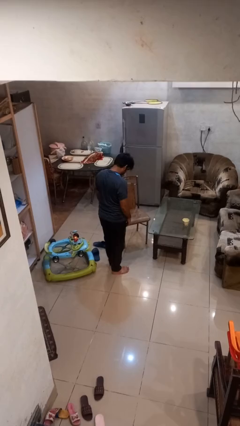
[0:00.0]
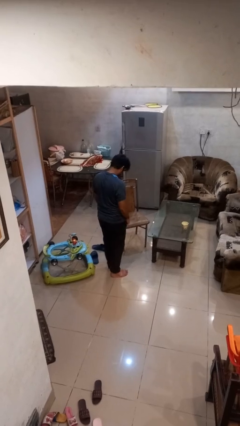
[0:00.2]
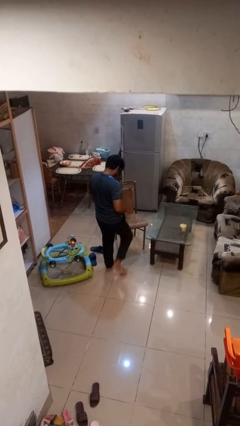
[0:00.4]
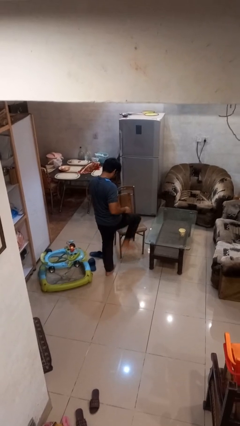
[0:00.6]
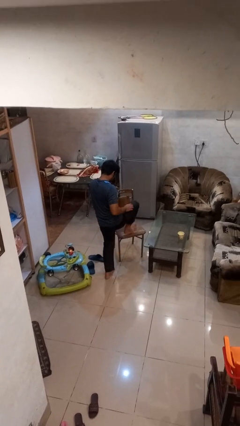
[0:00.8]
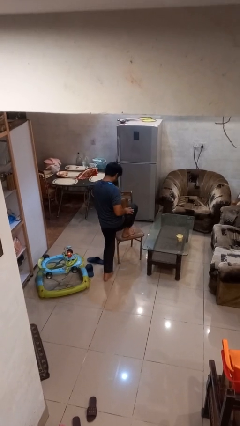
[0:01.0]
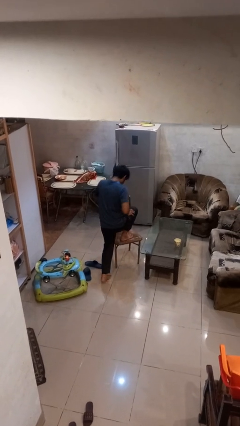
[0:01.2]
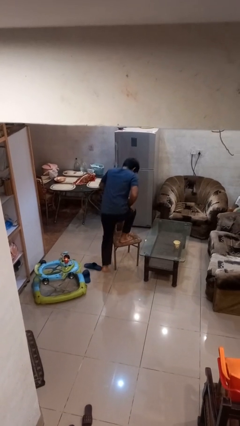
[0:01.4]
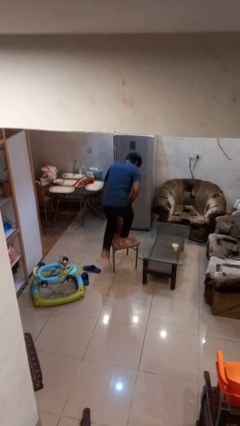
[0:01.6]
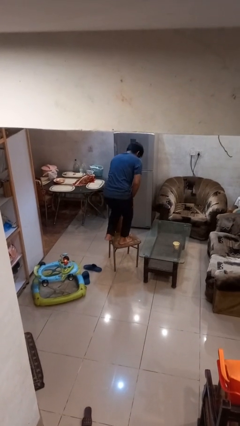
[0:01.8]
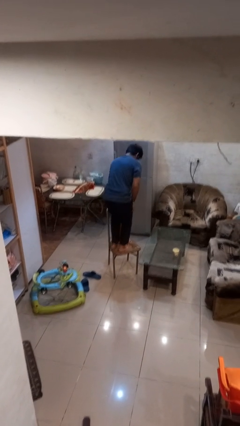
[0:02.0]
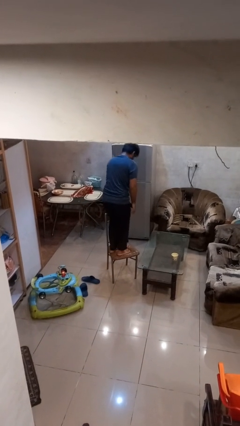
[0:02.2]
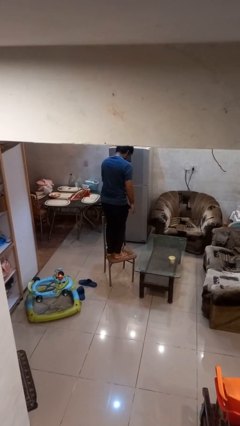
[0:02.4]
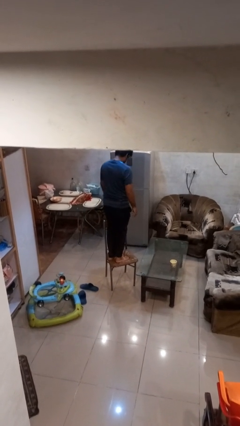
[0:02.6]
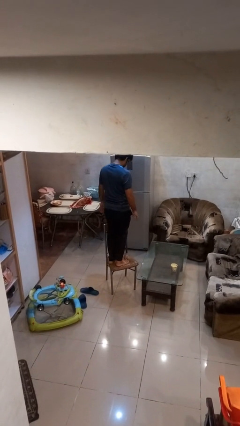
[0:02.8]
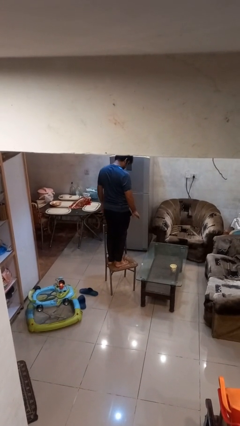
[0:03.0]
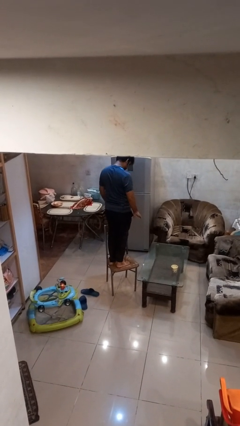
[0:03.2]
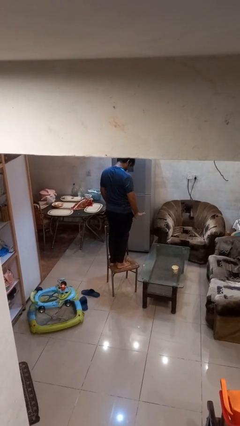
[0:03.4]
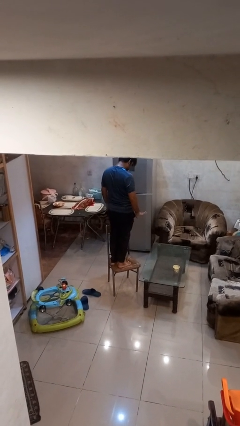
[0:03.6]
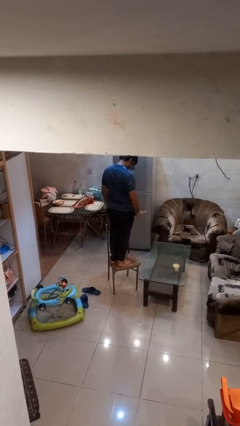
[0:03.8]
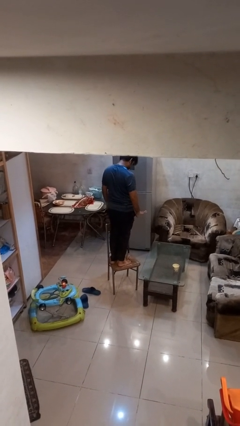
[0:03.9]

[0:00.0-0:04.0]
person climbs on chair

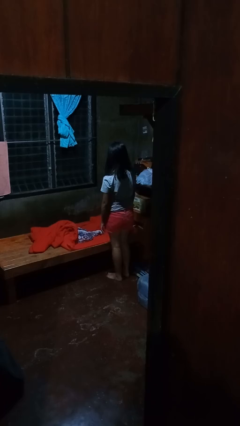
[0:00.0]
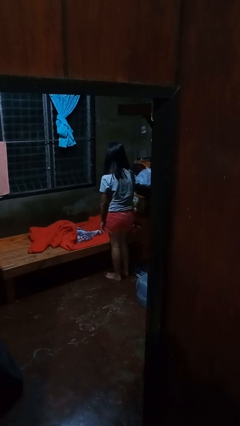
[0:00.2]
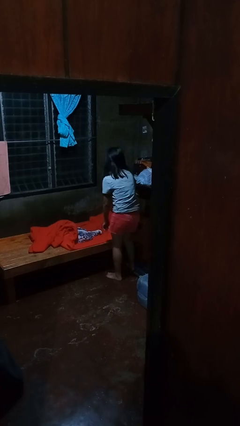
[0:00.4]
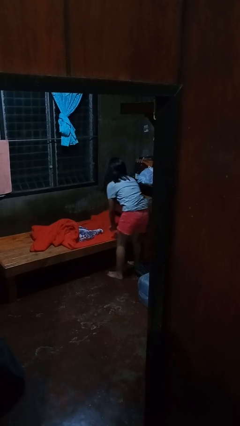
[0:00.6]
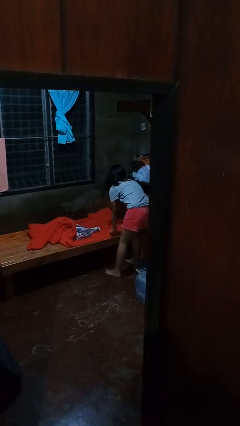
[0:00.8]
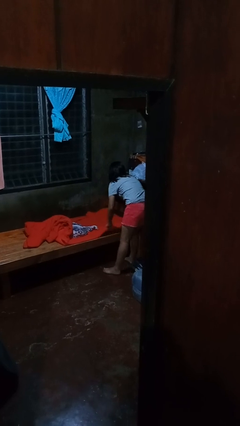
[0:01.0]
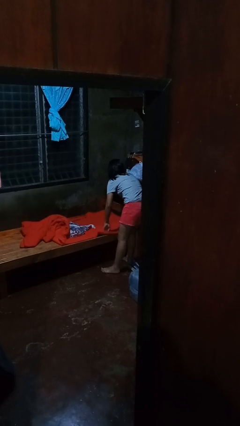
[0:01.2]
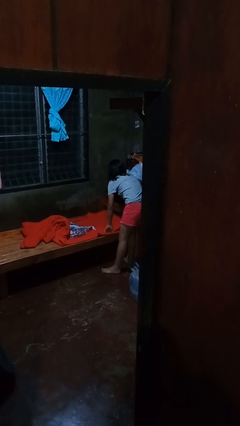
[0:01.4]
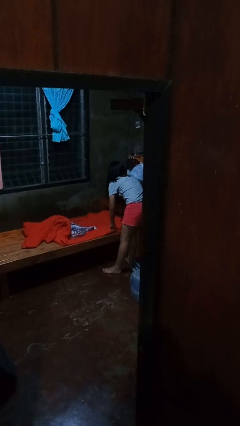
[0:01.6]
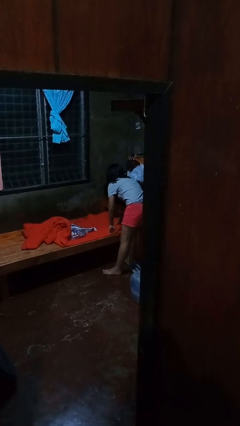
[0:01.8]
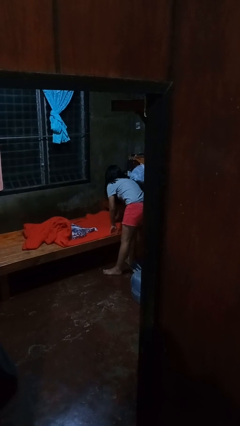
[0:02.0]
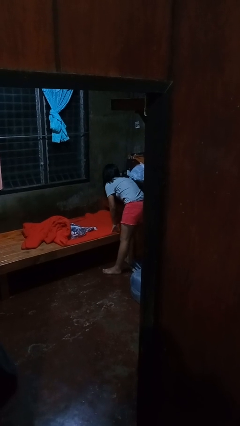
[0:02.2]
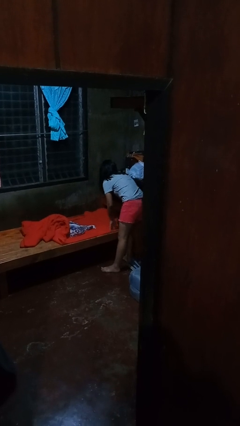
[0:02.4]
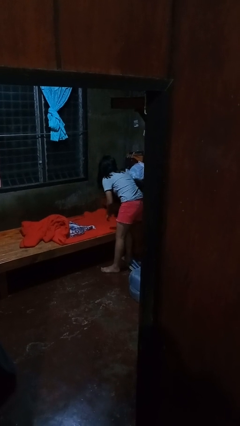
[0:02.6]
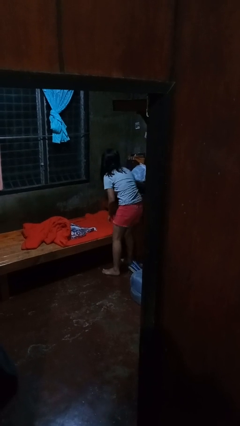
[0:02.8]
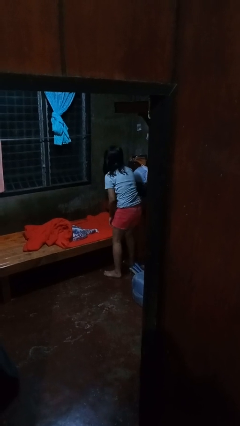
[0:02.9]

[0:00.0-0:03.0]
person makes bed

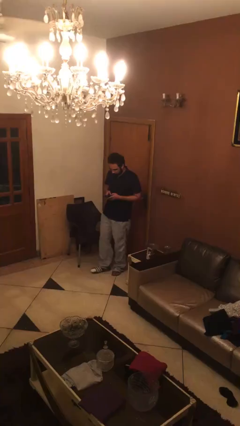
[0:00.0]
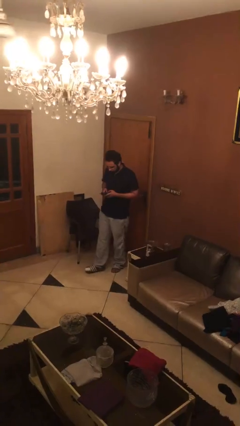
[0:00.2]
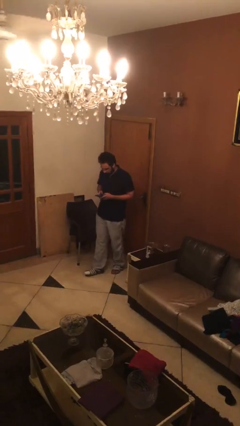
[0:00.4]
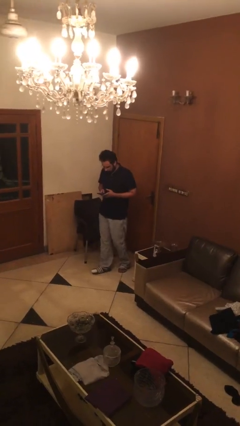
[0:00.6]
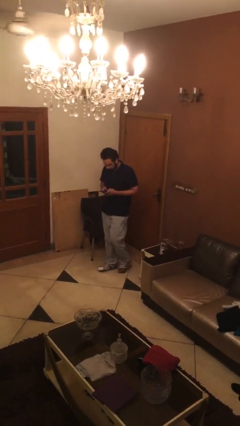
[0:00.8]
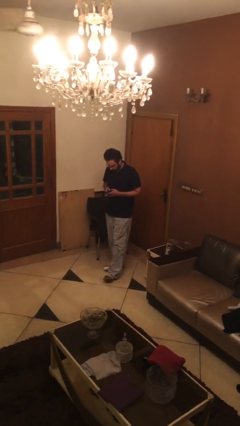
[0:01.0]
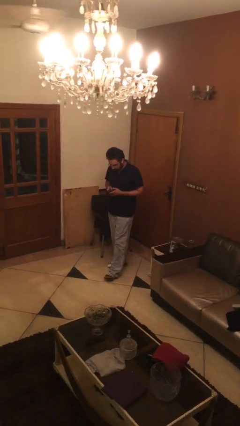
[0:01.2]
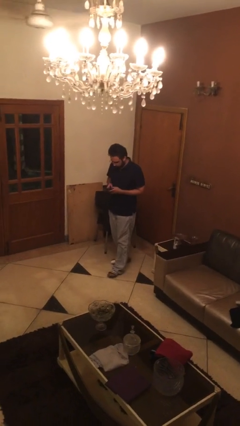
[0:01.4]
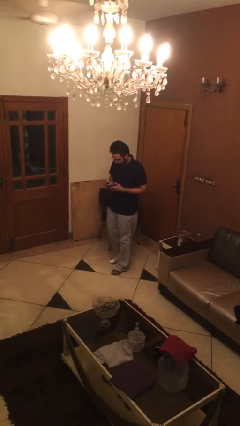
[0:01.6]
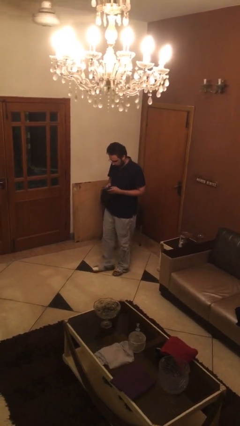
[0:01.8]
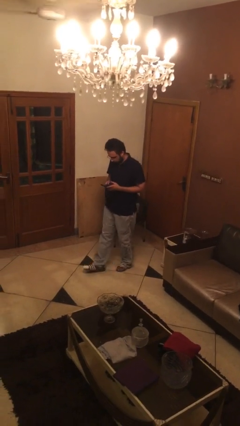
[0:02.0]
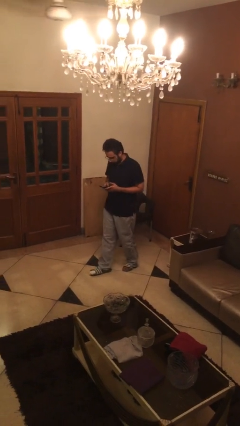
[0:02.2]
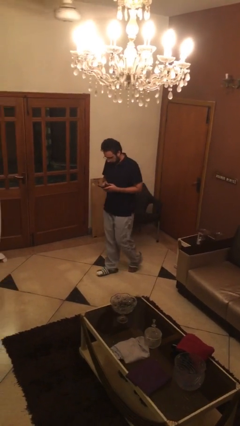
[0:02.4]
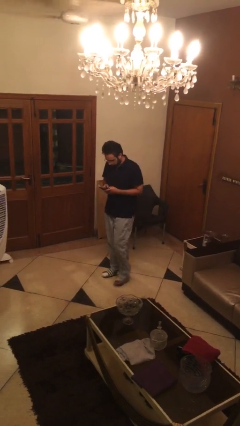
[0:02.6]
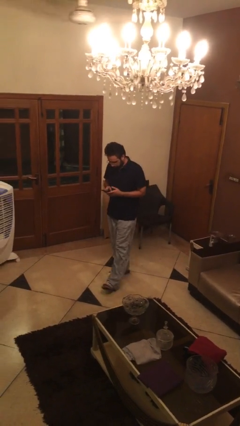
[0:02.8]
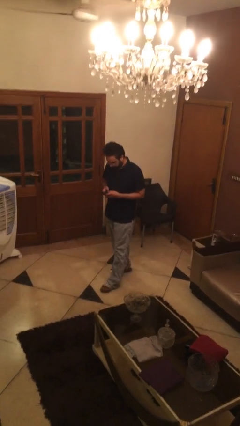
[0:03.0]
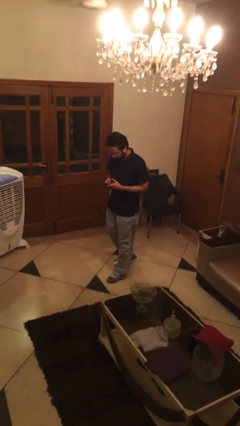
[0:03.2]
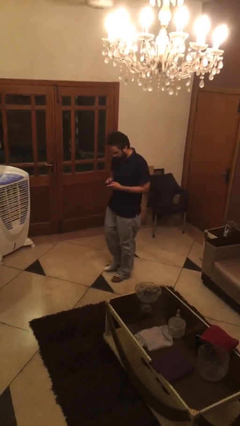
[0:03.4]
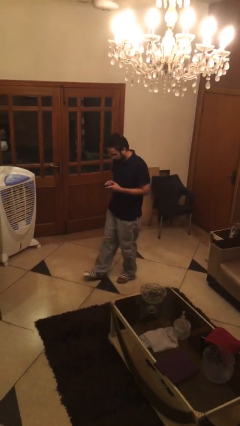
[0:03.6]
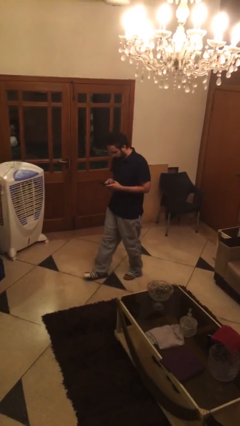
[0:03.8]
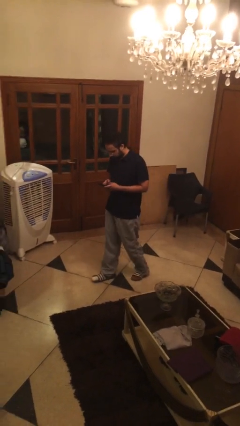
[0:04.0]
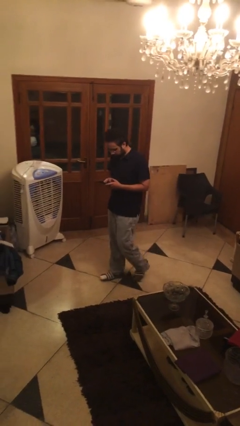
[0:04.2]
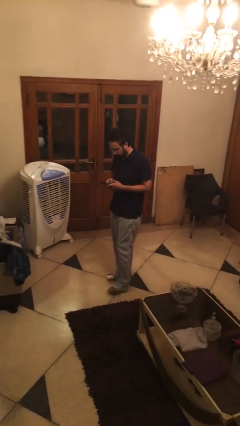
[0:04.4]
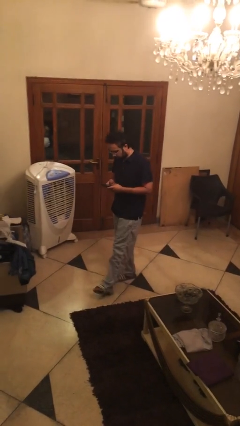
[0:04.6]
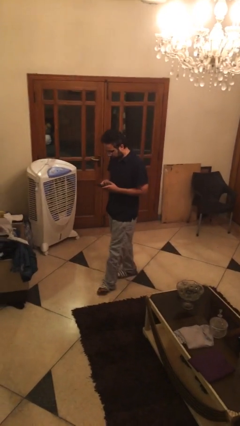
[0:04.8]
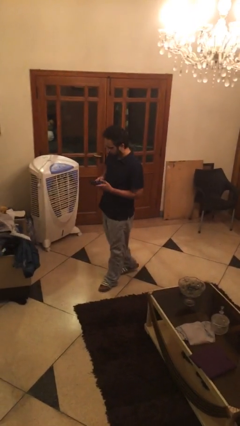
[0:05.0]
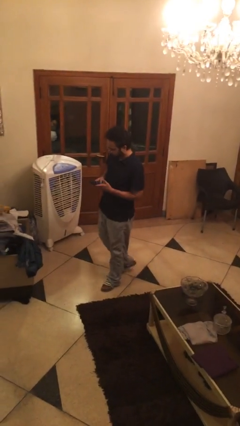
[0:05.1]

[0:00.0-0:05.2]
person texts on phone

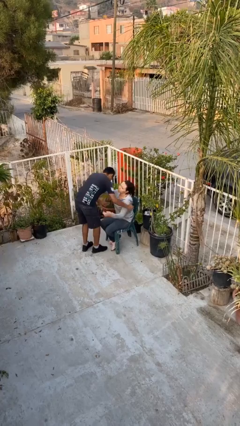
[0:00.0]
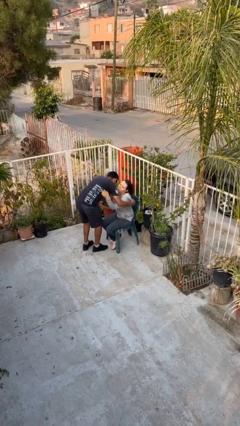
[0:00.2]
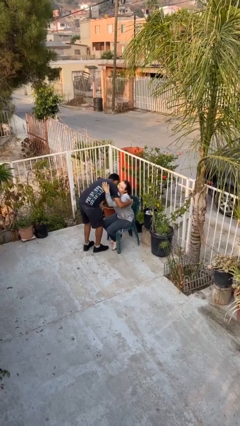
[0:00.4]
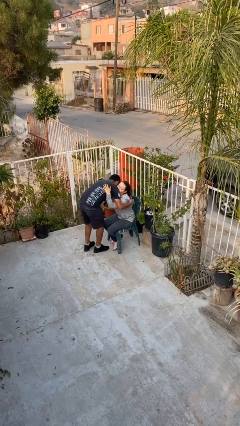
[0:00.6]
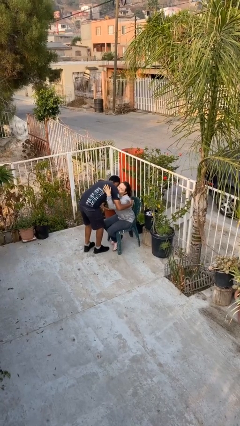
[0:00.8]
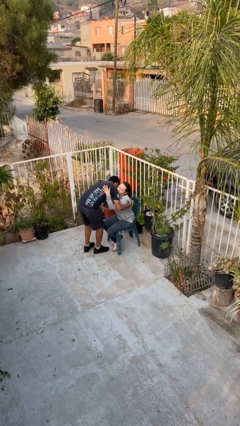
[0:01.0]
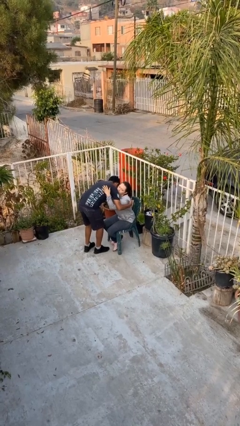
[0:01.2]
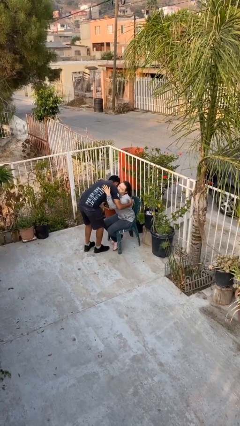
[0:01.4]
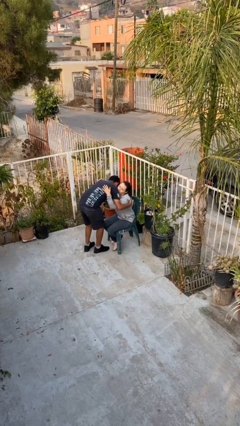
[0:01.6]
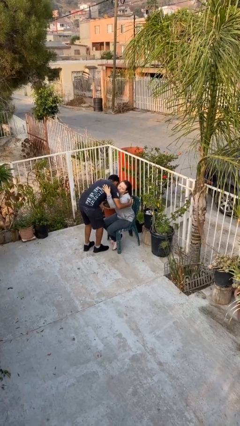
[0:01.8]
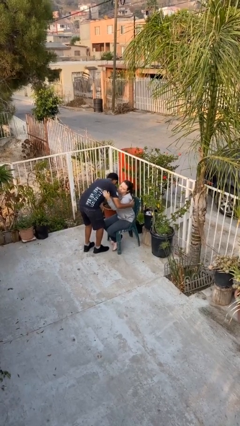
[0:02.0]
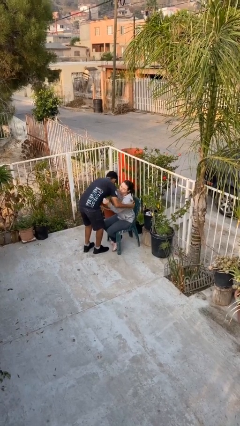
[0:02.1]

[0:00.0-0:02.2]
person embraces person

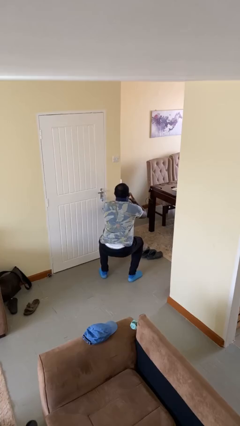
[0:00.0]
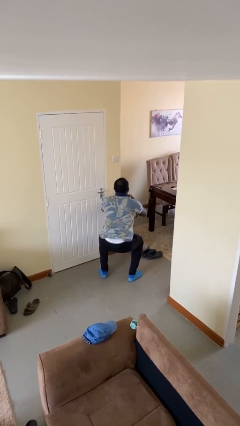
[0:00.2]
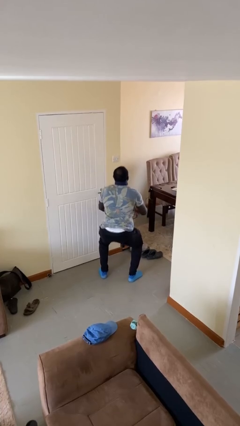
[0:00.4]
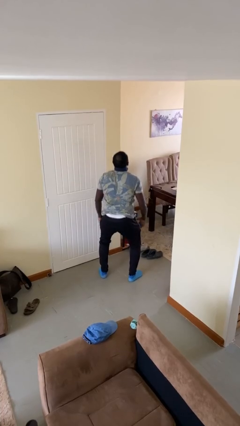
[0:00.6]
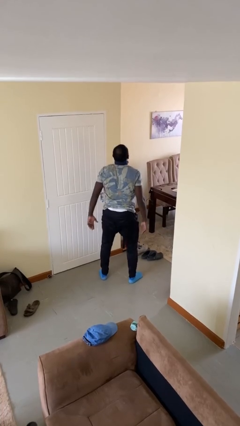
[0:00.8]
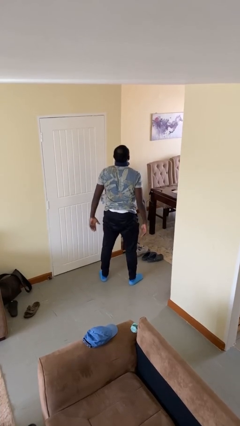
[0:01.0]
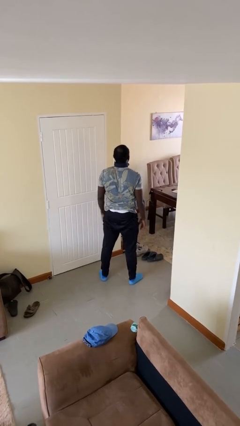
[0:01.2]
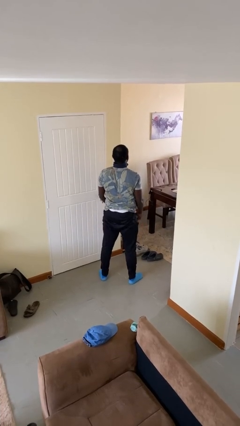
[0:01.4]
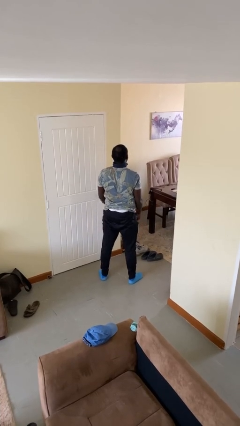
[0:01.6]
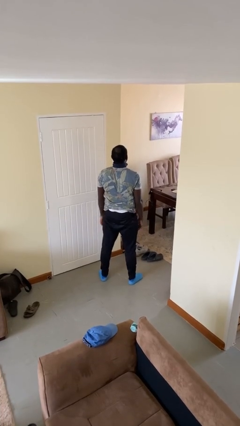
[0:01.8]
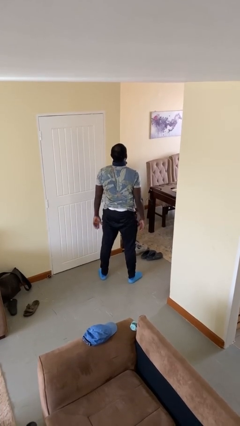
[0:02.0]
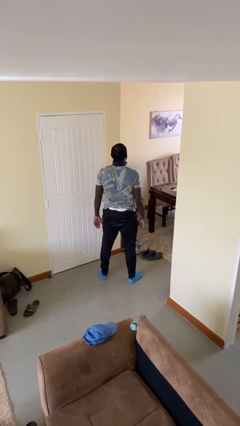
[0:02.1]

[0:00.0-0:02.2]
person stands up

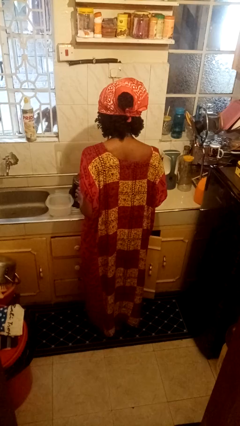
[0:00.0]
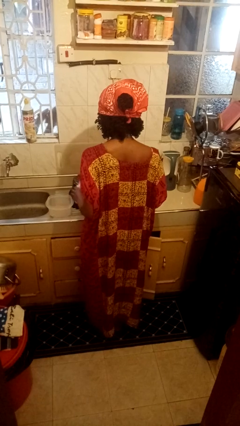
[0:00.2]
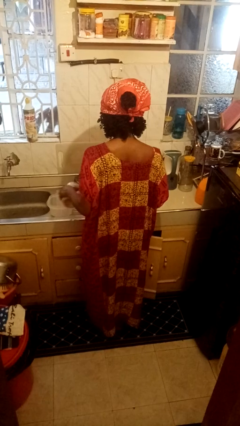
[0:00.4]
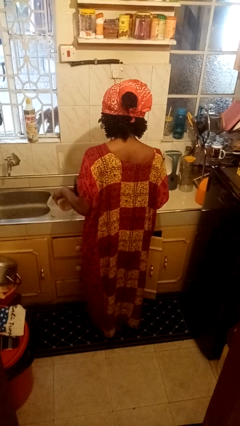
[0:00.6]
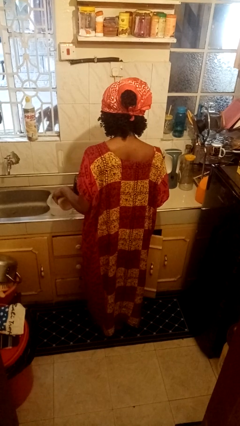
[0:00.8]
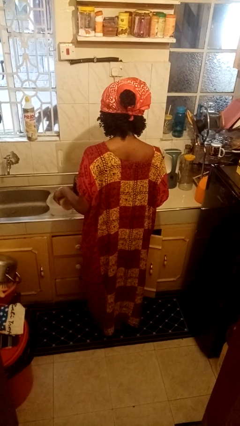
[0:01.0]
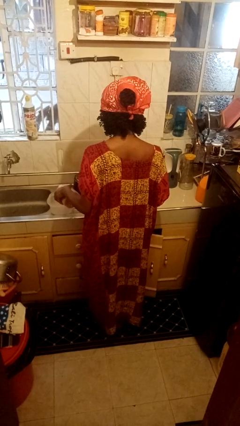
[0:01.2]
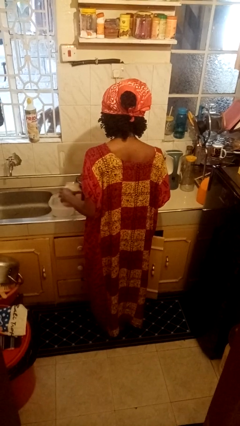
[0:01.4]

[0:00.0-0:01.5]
person pours into bowl
